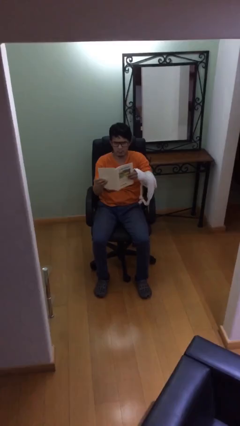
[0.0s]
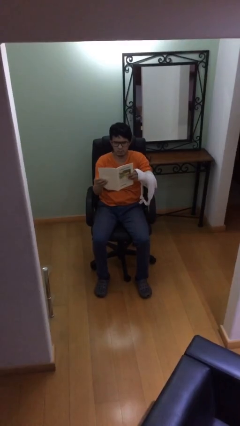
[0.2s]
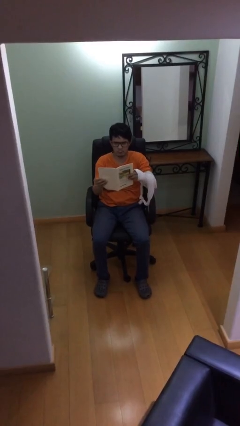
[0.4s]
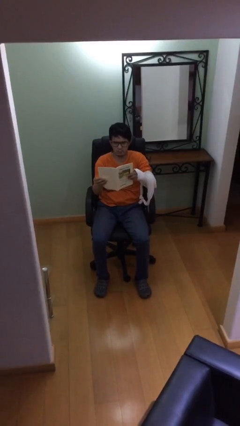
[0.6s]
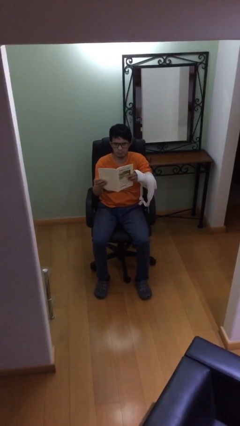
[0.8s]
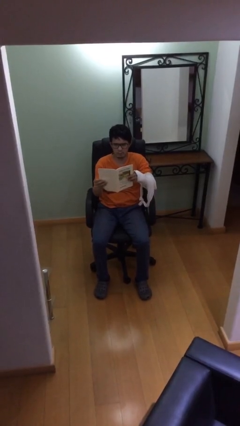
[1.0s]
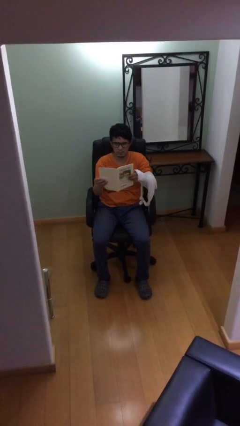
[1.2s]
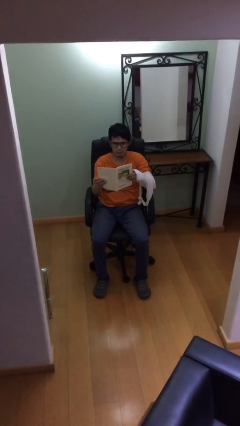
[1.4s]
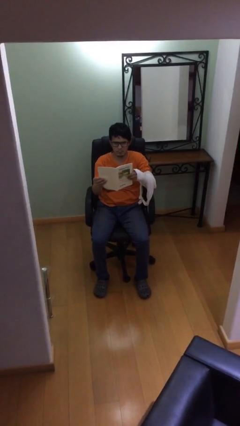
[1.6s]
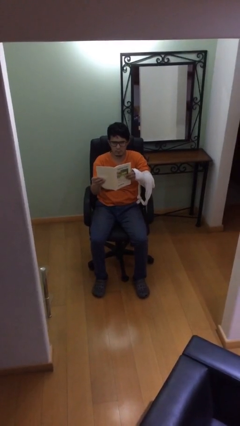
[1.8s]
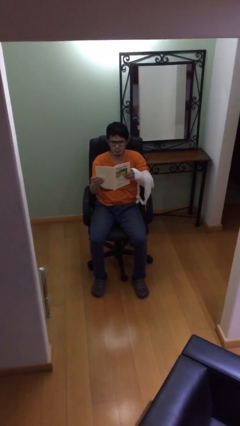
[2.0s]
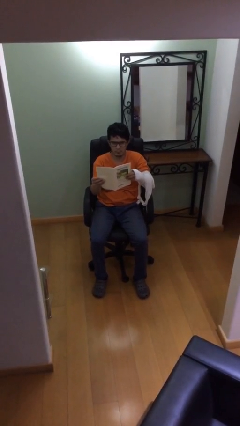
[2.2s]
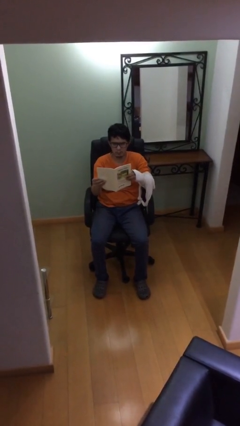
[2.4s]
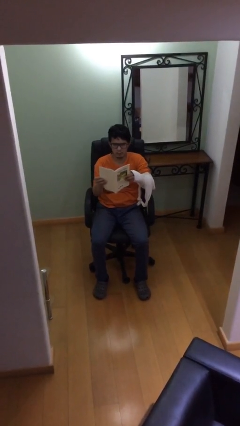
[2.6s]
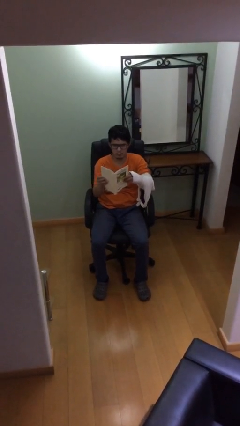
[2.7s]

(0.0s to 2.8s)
person reads document

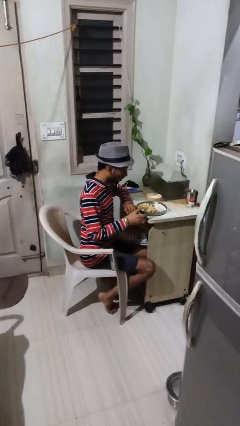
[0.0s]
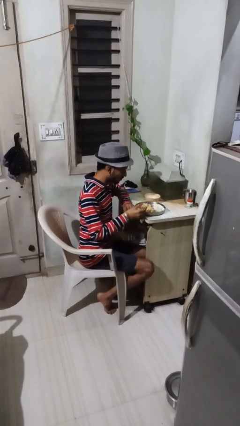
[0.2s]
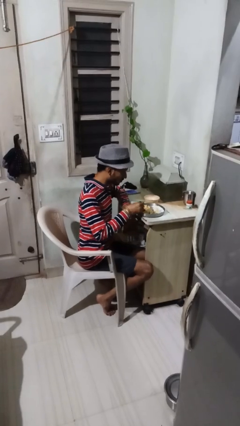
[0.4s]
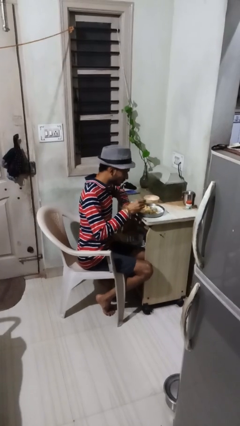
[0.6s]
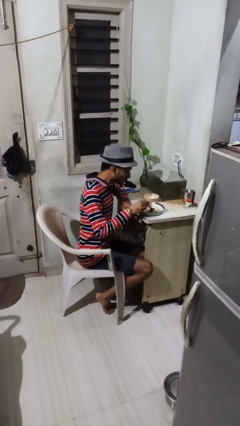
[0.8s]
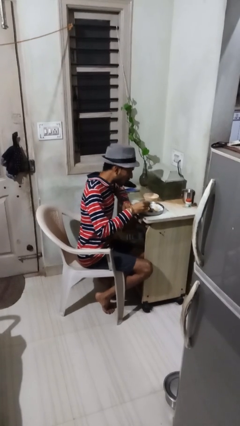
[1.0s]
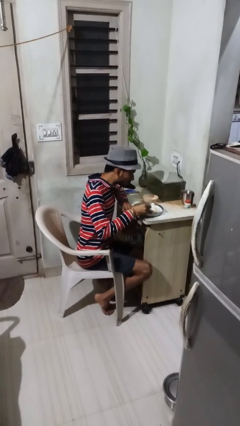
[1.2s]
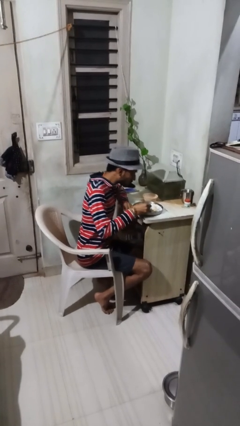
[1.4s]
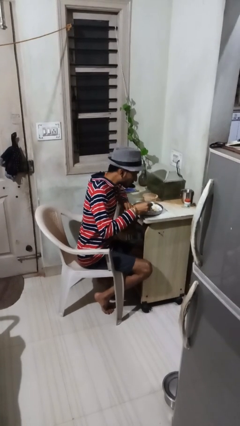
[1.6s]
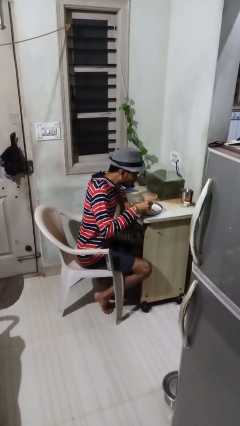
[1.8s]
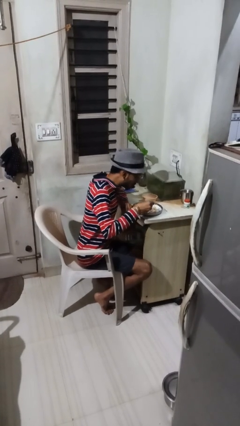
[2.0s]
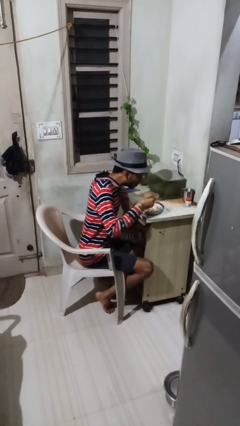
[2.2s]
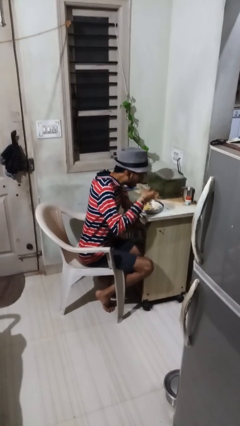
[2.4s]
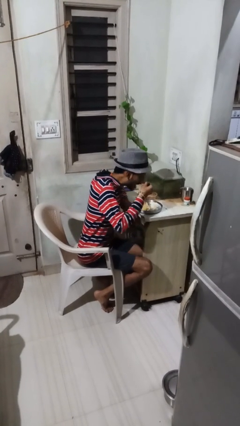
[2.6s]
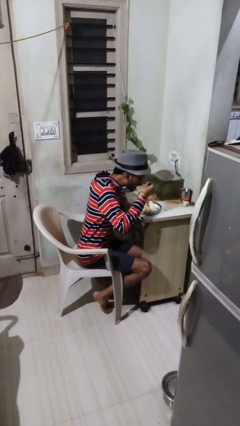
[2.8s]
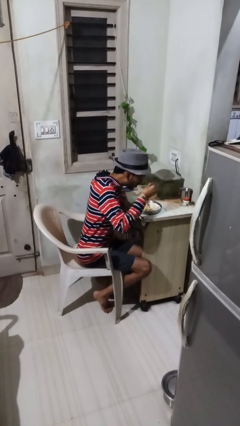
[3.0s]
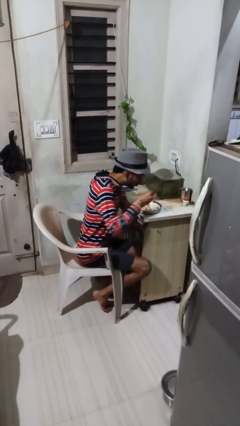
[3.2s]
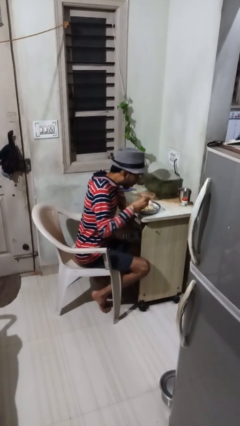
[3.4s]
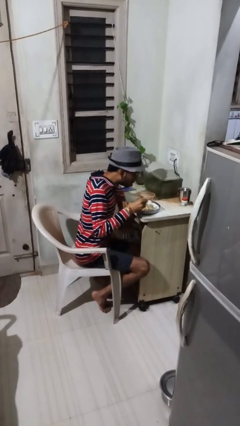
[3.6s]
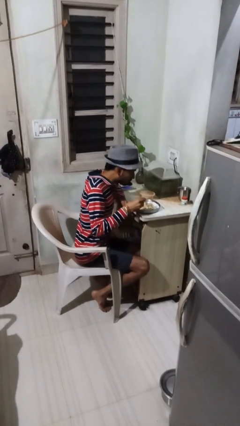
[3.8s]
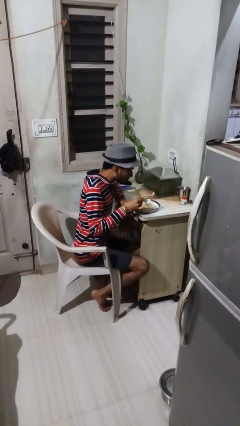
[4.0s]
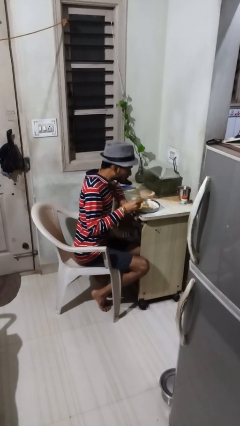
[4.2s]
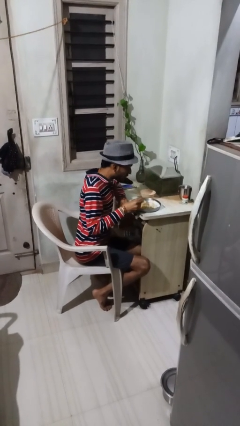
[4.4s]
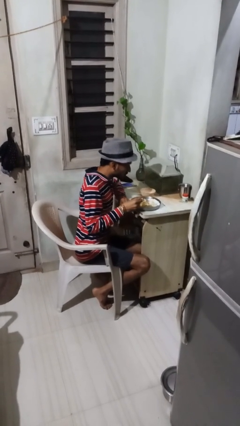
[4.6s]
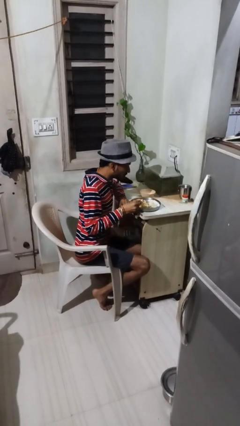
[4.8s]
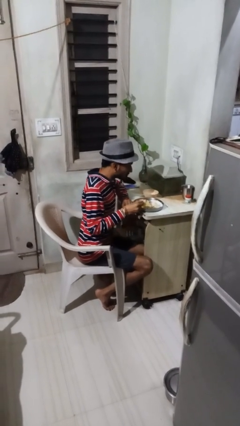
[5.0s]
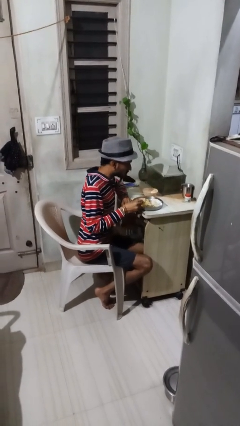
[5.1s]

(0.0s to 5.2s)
person eats with utensil

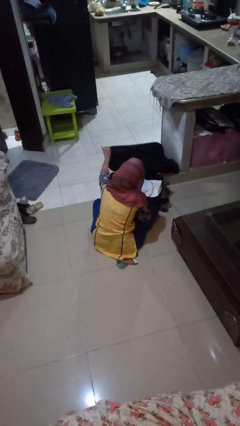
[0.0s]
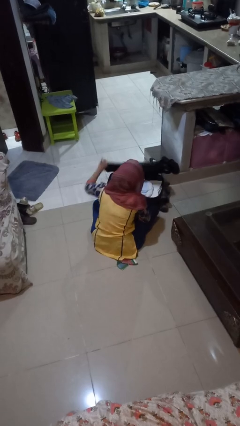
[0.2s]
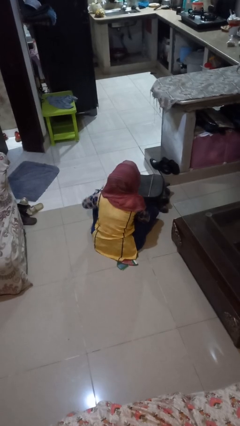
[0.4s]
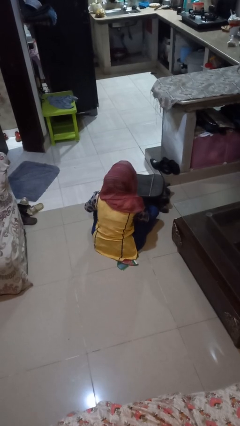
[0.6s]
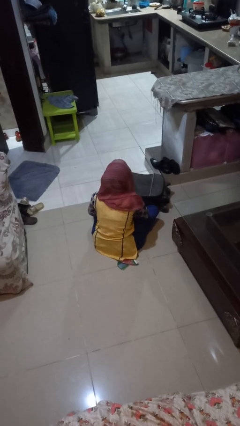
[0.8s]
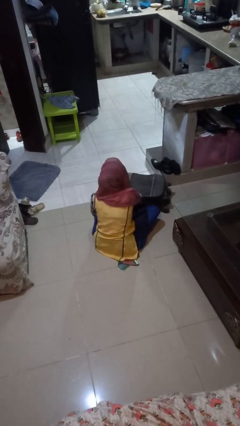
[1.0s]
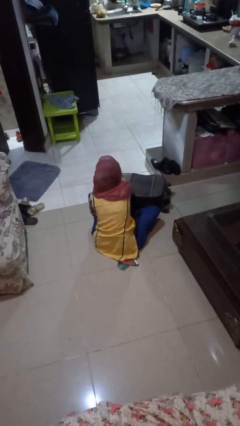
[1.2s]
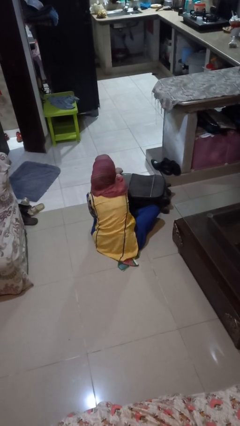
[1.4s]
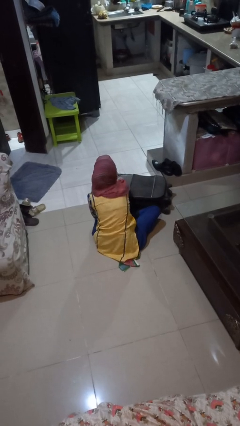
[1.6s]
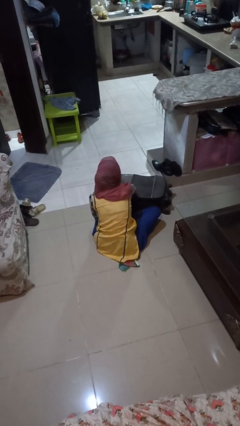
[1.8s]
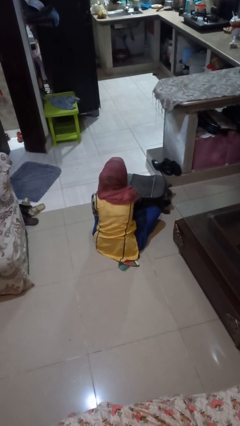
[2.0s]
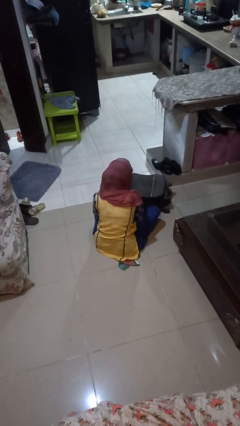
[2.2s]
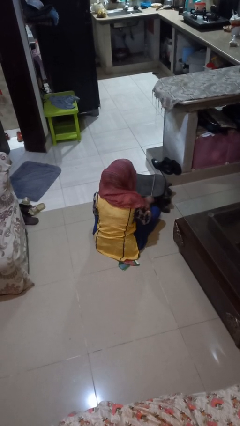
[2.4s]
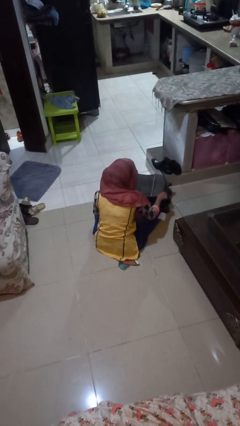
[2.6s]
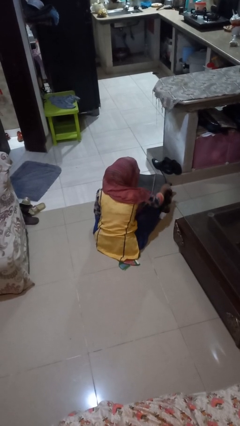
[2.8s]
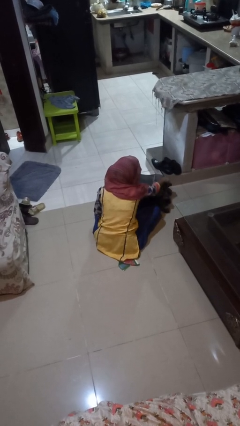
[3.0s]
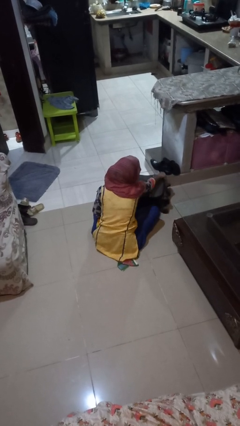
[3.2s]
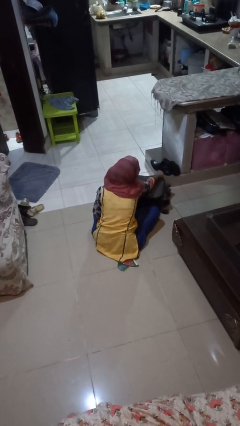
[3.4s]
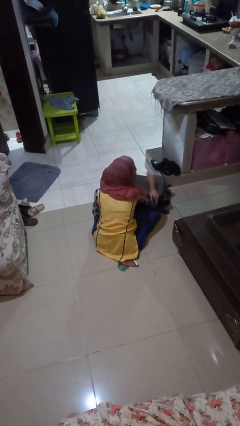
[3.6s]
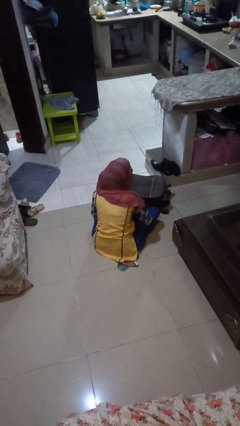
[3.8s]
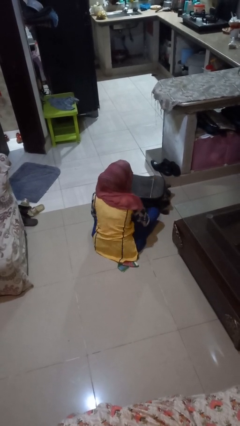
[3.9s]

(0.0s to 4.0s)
person closes suitcase

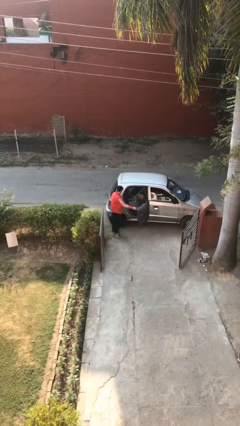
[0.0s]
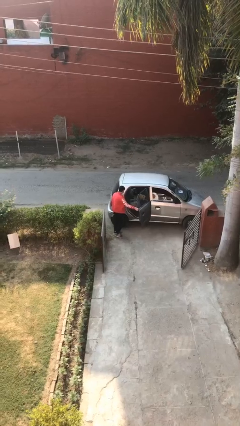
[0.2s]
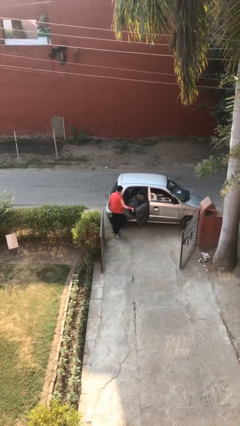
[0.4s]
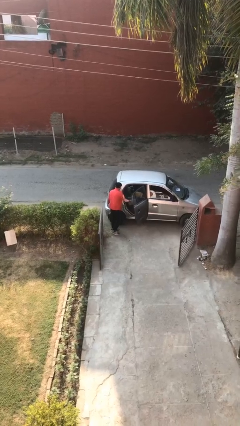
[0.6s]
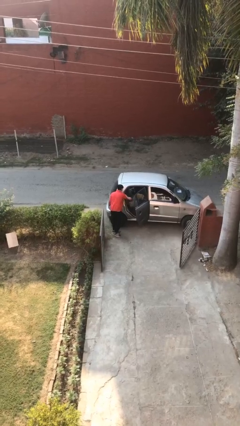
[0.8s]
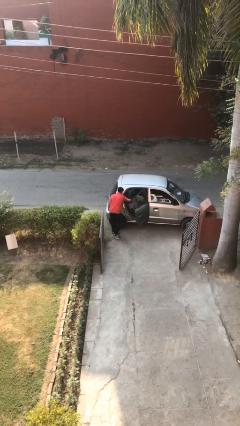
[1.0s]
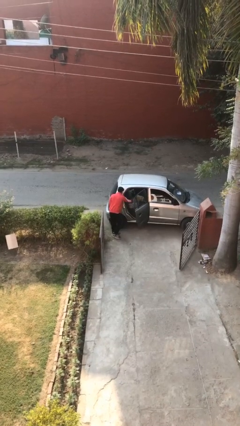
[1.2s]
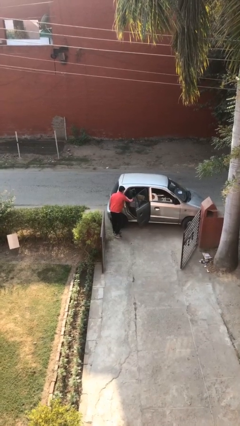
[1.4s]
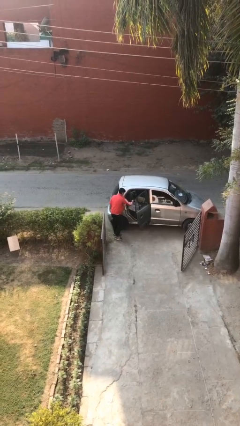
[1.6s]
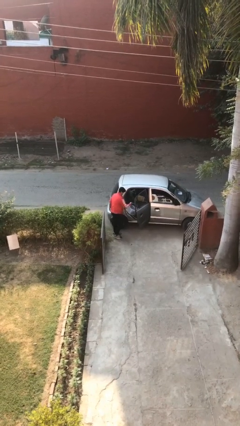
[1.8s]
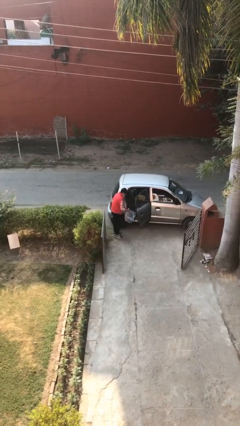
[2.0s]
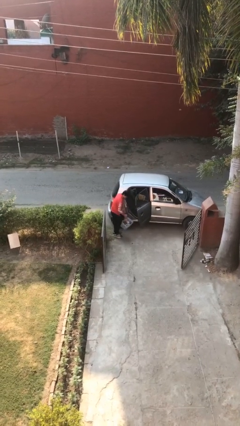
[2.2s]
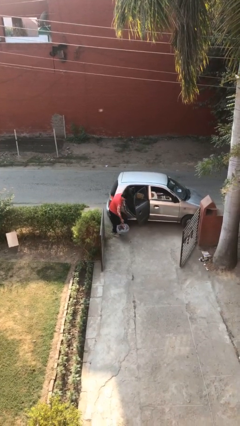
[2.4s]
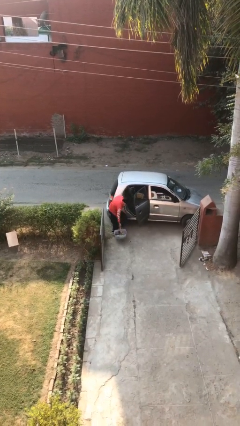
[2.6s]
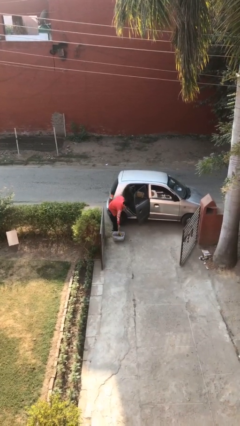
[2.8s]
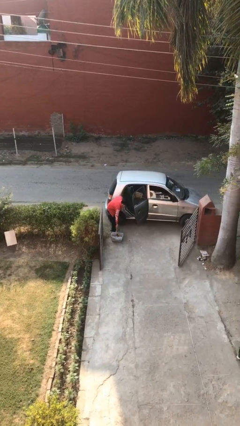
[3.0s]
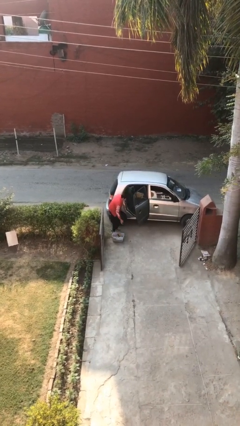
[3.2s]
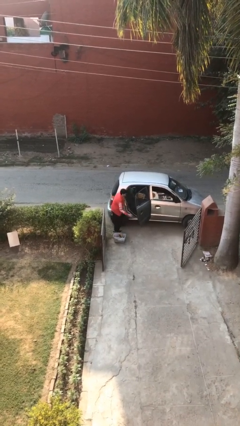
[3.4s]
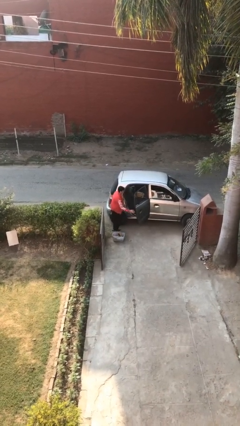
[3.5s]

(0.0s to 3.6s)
person unloads car

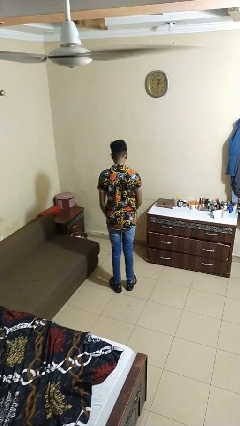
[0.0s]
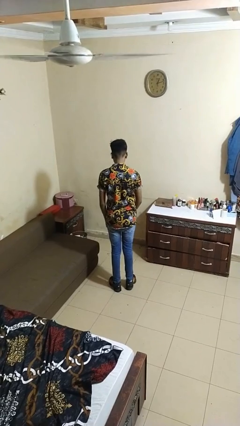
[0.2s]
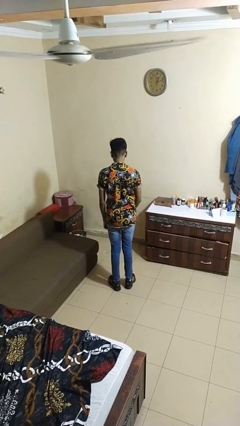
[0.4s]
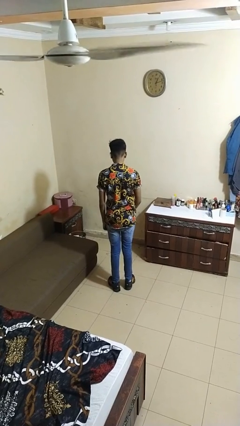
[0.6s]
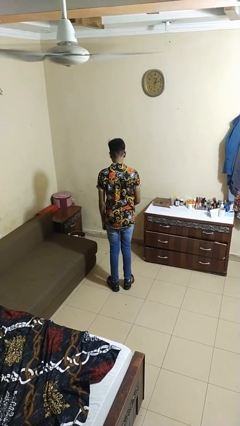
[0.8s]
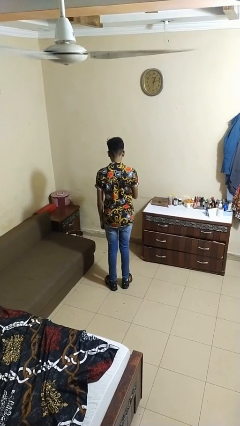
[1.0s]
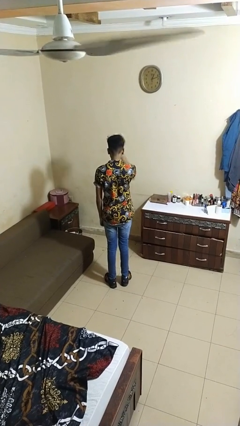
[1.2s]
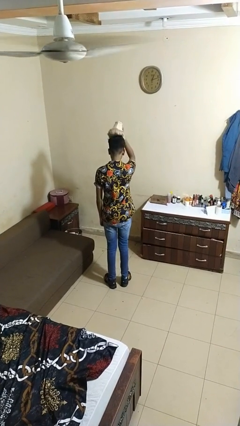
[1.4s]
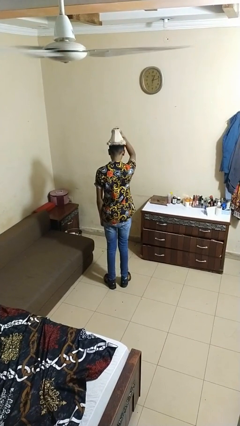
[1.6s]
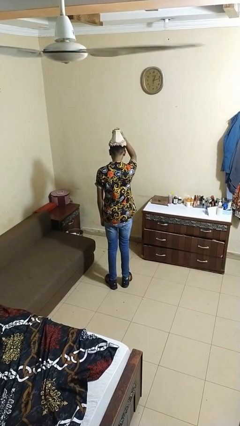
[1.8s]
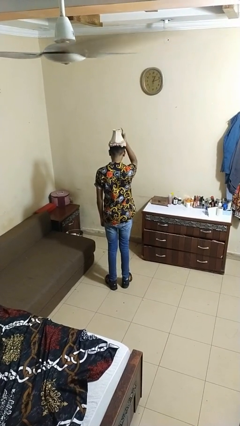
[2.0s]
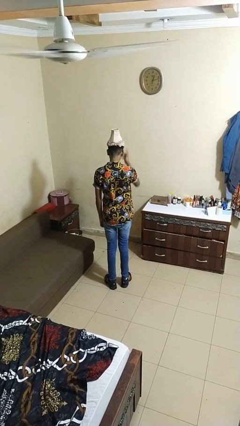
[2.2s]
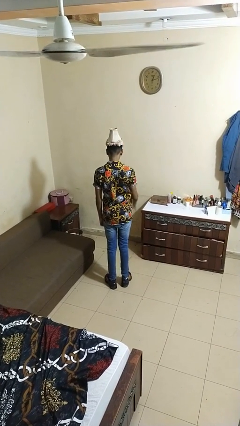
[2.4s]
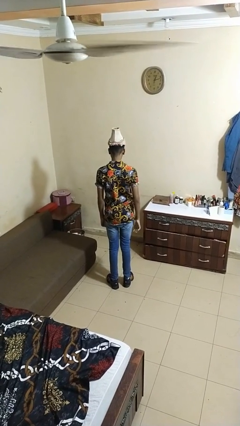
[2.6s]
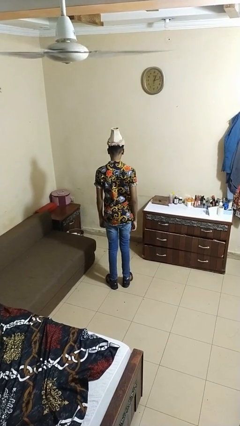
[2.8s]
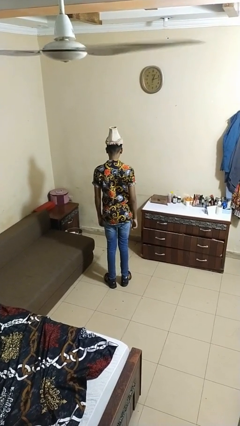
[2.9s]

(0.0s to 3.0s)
person puts on hat
